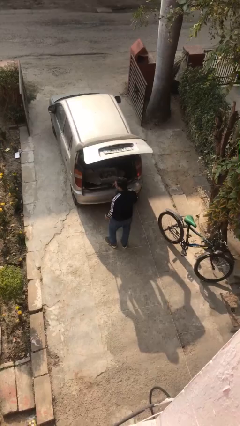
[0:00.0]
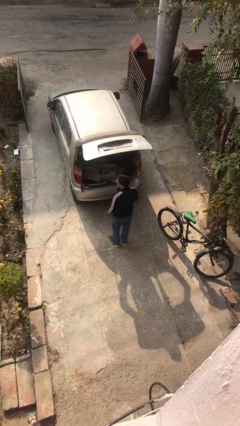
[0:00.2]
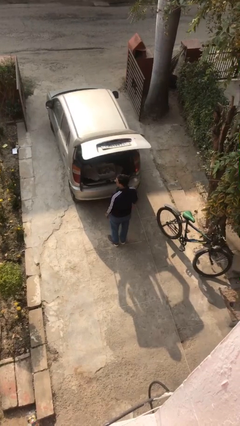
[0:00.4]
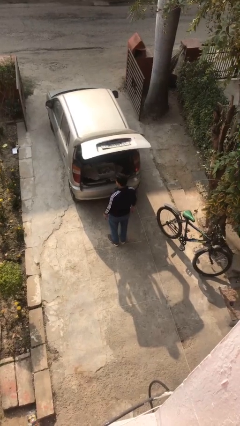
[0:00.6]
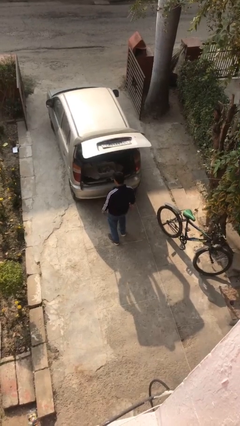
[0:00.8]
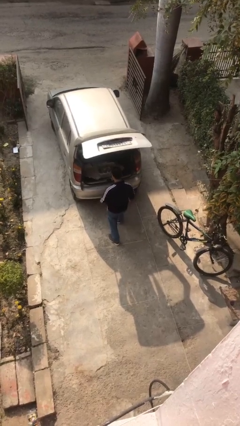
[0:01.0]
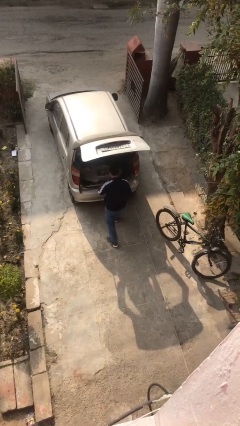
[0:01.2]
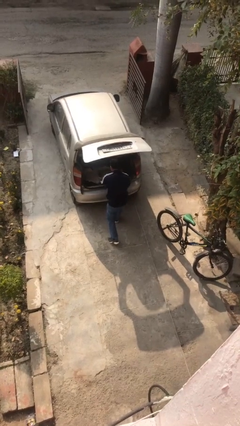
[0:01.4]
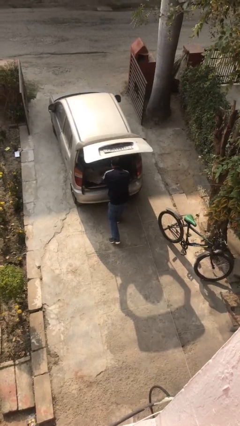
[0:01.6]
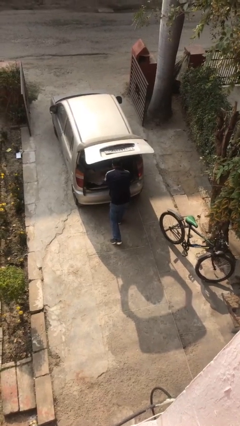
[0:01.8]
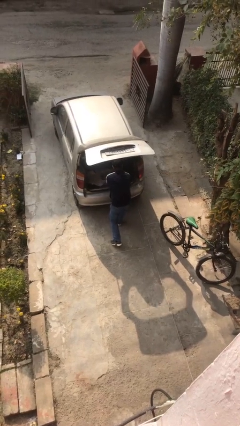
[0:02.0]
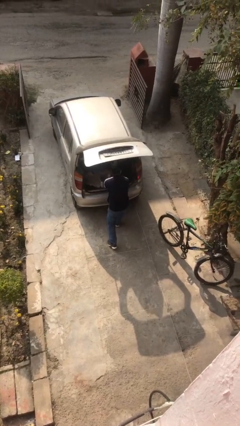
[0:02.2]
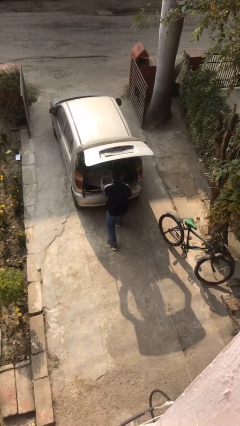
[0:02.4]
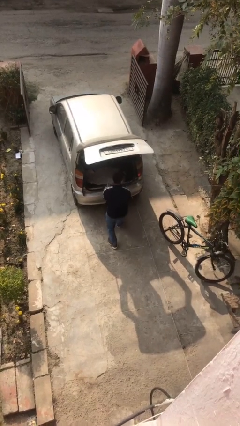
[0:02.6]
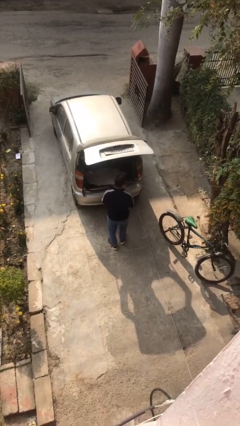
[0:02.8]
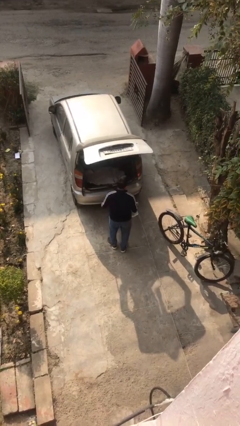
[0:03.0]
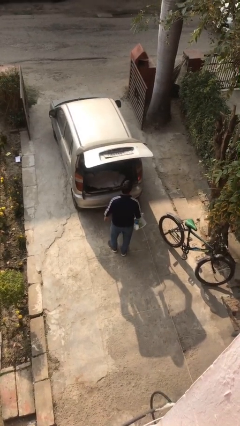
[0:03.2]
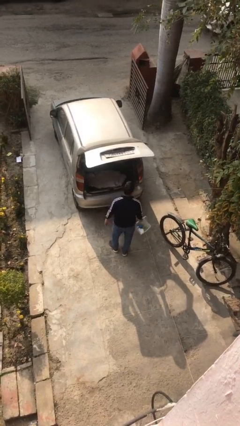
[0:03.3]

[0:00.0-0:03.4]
person unloads car

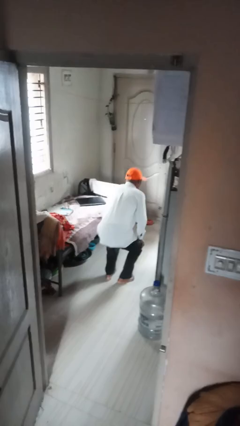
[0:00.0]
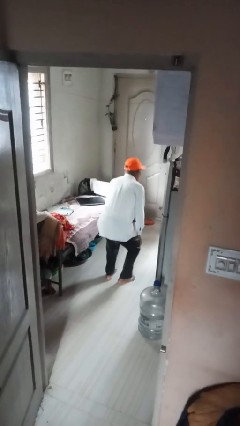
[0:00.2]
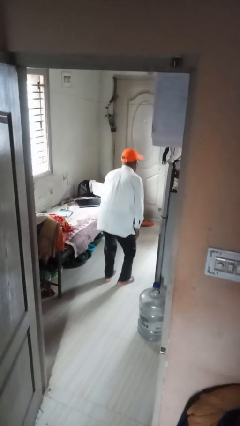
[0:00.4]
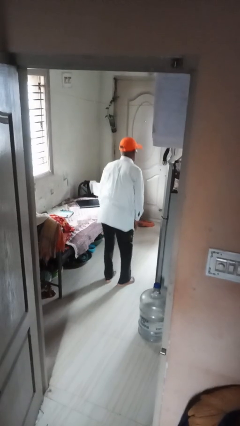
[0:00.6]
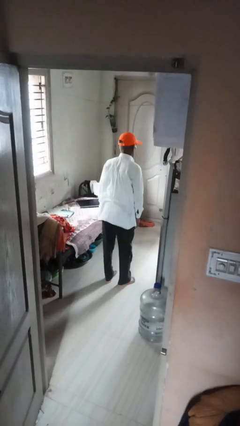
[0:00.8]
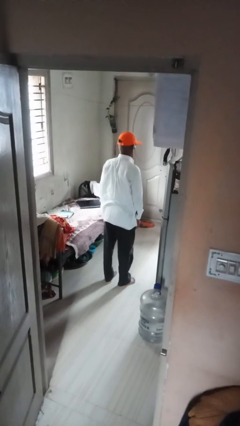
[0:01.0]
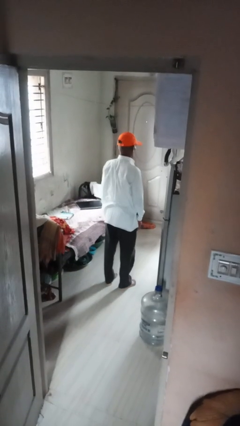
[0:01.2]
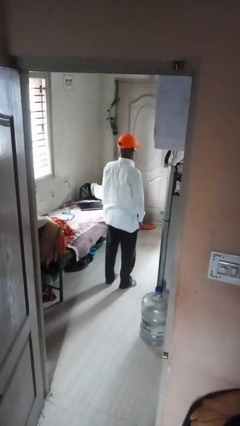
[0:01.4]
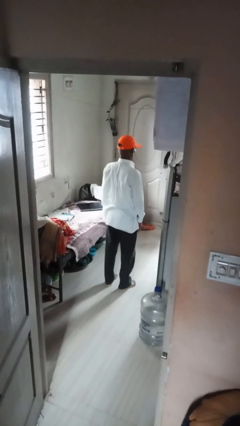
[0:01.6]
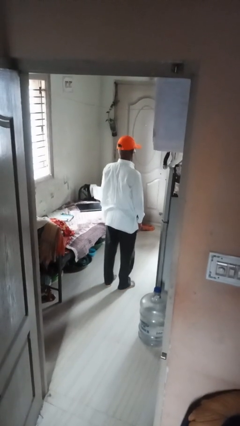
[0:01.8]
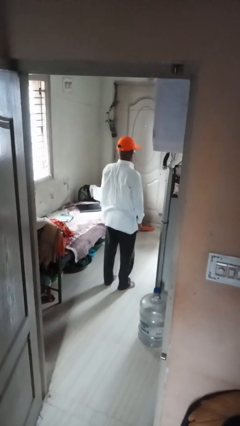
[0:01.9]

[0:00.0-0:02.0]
person stands up

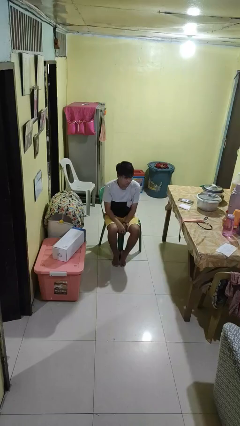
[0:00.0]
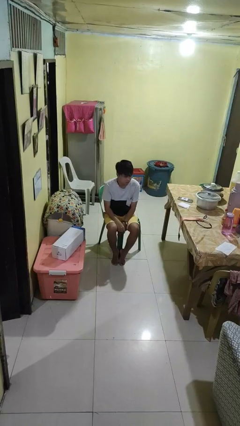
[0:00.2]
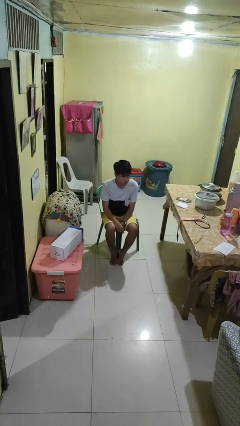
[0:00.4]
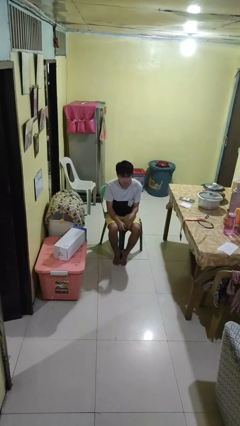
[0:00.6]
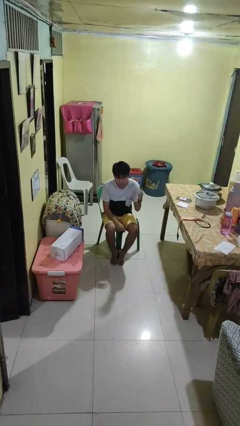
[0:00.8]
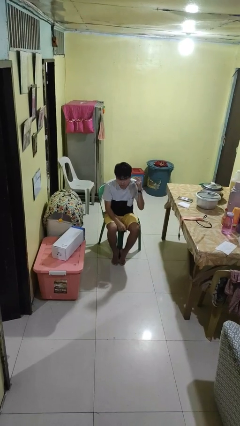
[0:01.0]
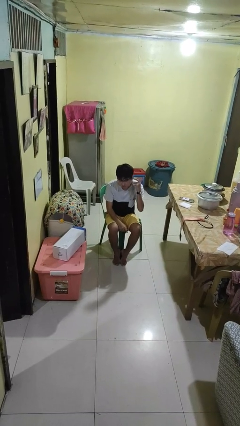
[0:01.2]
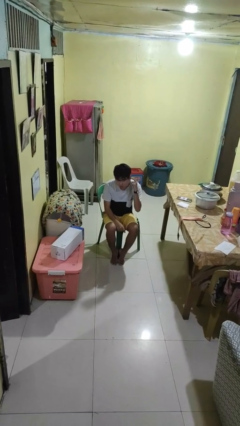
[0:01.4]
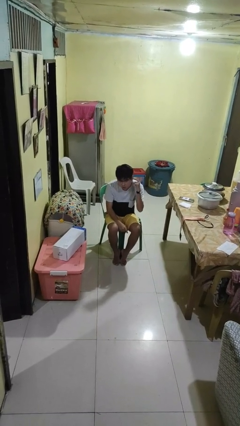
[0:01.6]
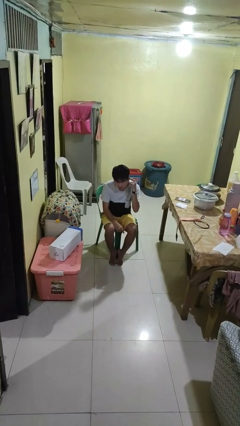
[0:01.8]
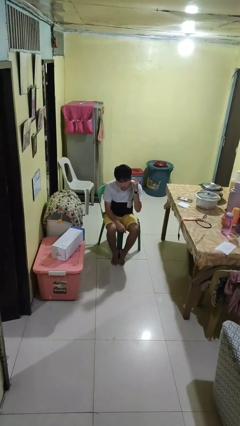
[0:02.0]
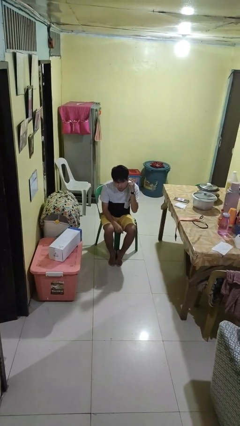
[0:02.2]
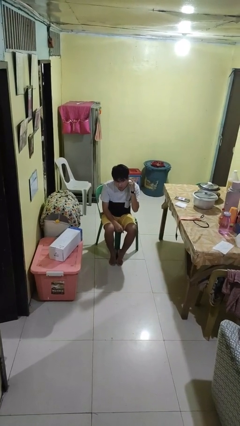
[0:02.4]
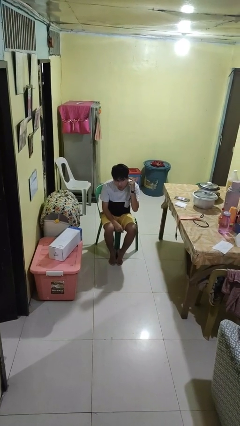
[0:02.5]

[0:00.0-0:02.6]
person gestures listen closely

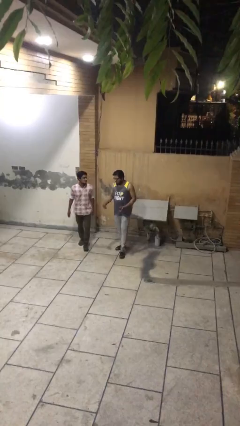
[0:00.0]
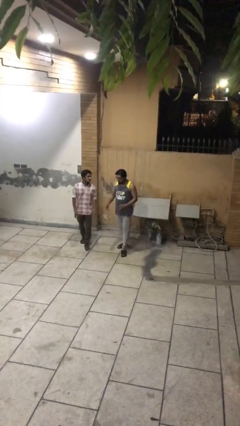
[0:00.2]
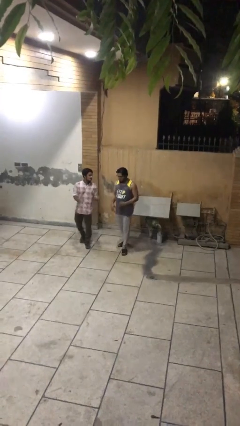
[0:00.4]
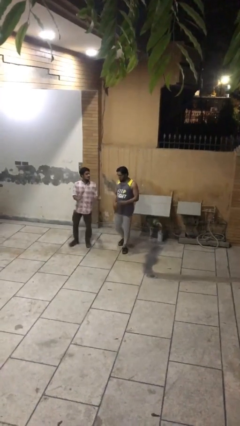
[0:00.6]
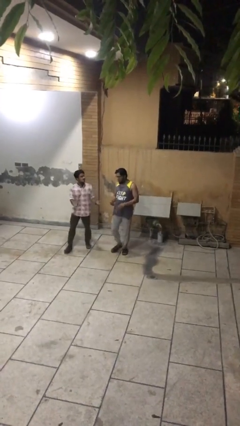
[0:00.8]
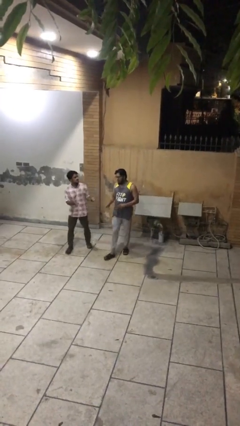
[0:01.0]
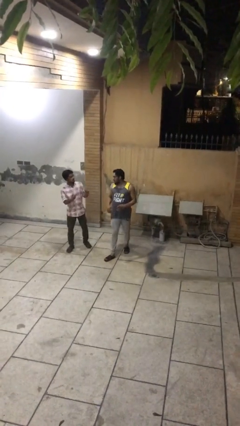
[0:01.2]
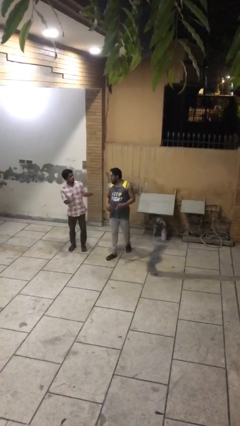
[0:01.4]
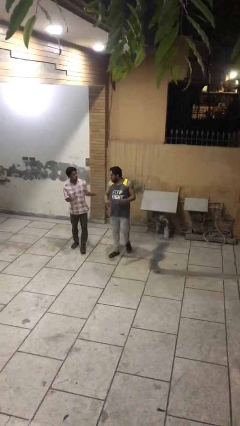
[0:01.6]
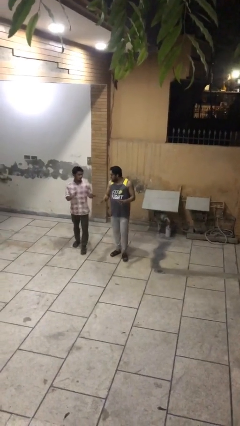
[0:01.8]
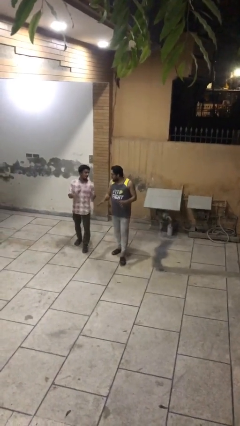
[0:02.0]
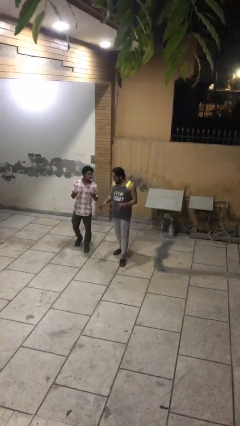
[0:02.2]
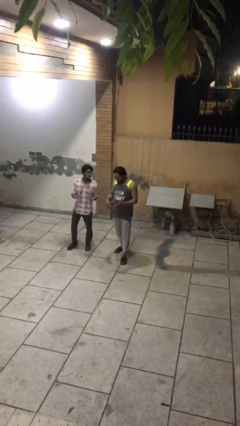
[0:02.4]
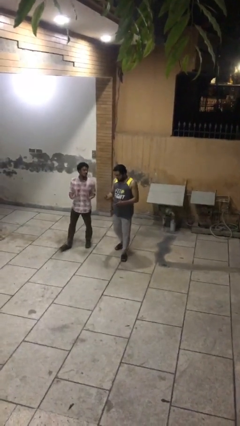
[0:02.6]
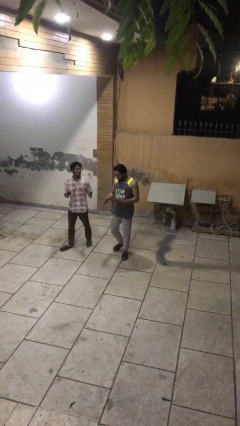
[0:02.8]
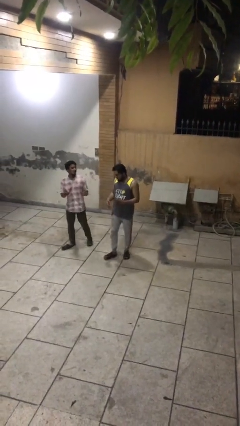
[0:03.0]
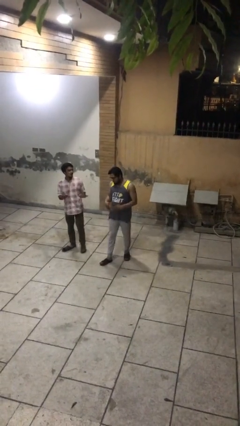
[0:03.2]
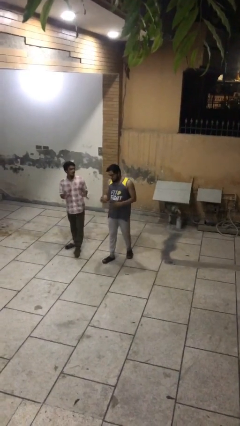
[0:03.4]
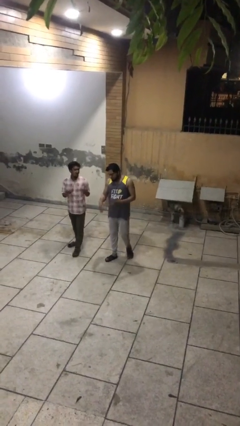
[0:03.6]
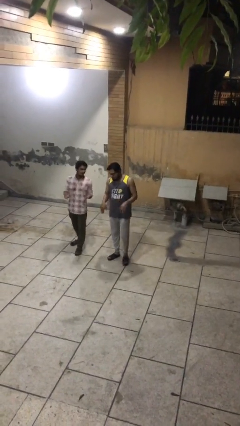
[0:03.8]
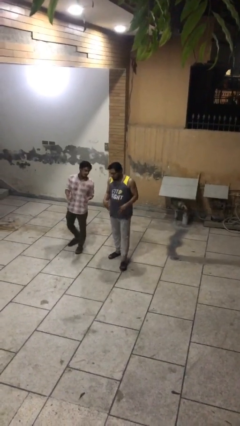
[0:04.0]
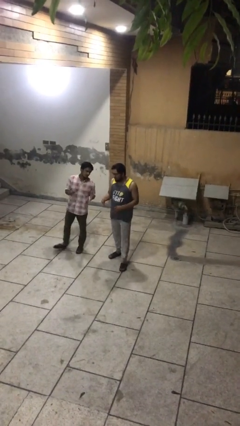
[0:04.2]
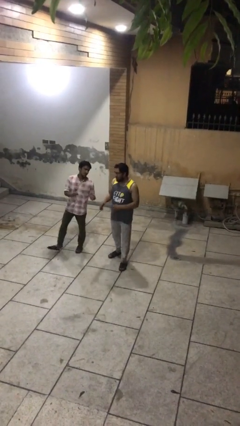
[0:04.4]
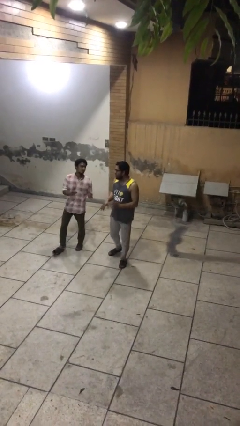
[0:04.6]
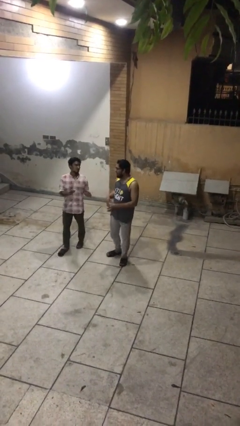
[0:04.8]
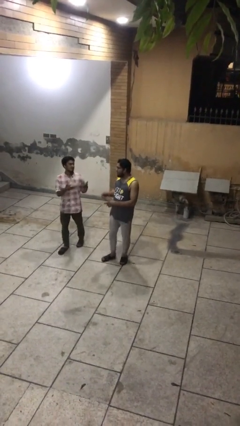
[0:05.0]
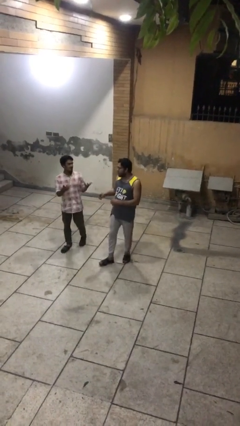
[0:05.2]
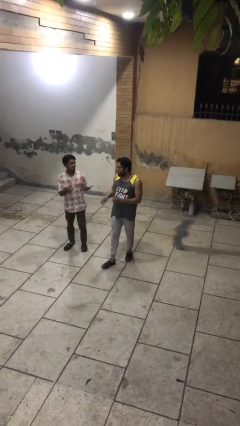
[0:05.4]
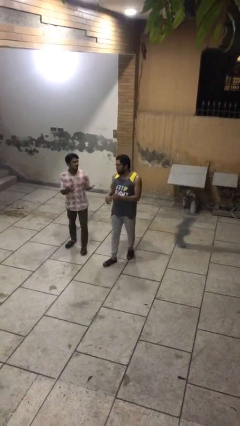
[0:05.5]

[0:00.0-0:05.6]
person talks to person

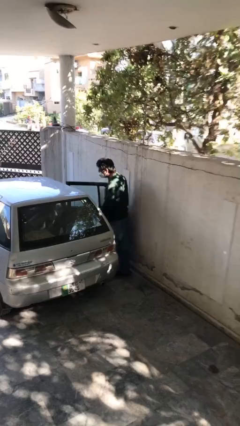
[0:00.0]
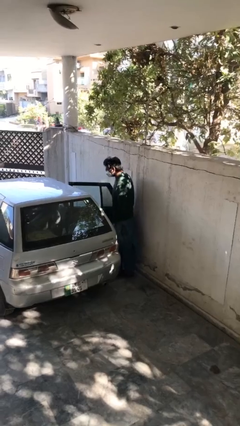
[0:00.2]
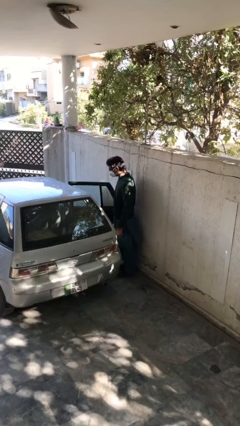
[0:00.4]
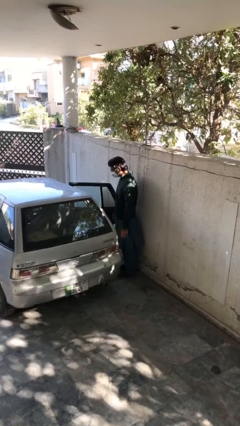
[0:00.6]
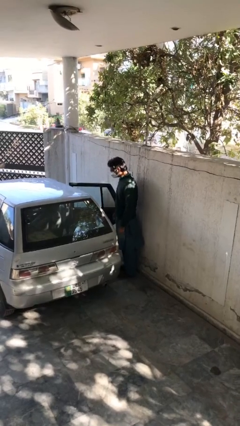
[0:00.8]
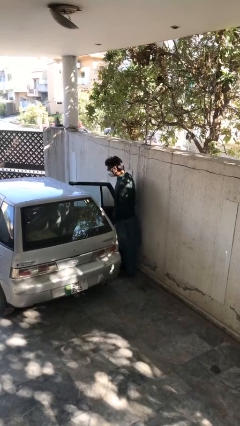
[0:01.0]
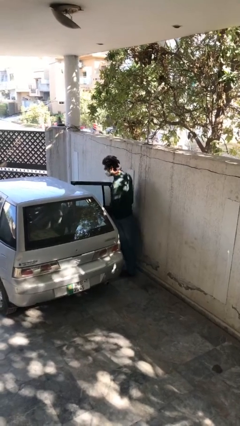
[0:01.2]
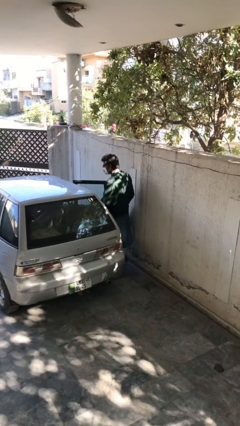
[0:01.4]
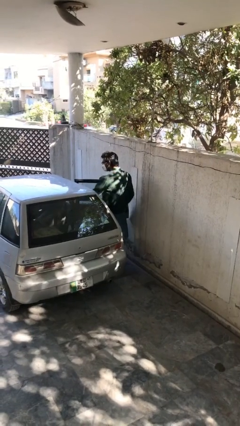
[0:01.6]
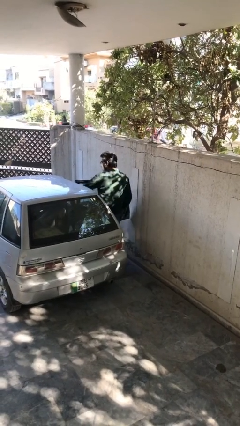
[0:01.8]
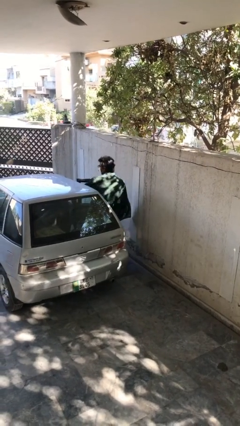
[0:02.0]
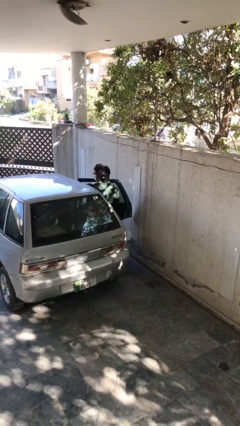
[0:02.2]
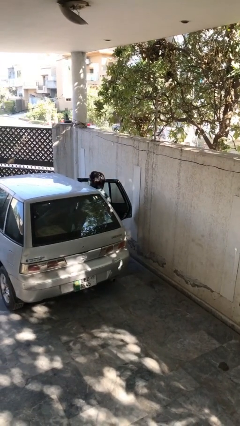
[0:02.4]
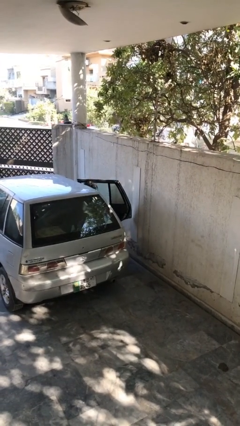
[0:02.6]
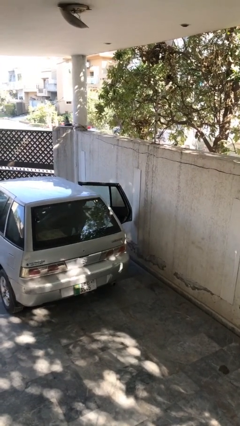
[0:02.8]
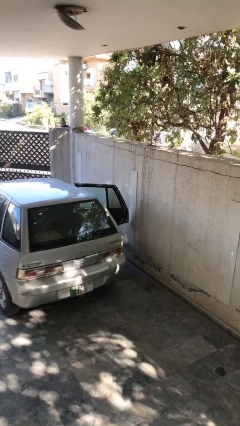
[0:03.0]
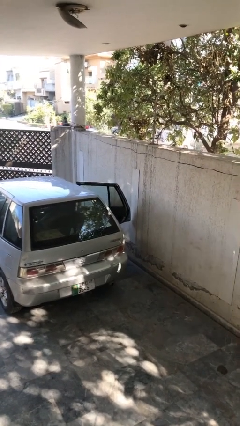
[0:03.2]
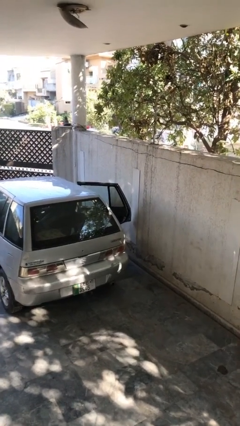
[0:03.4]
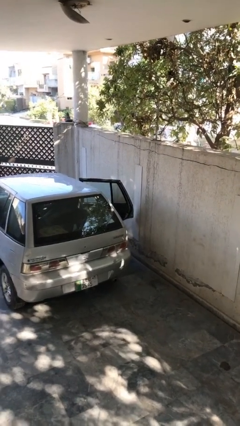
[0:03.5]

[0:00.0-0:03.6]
person enters car

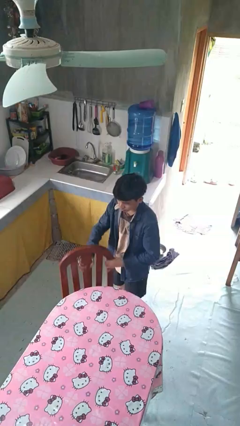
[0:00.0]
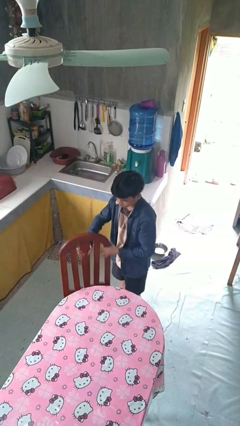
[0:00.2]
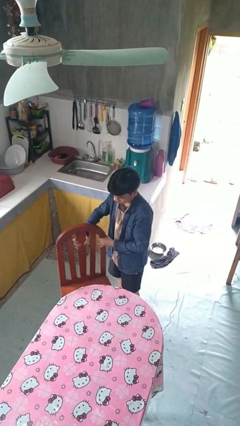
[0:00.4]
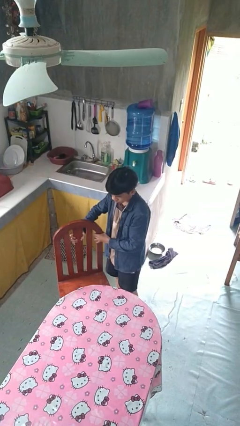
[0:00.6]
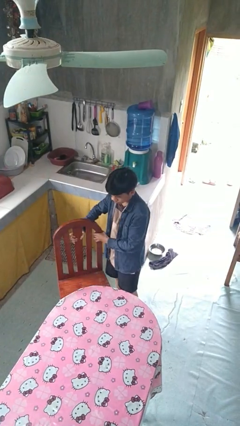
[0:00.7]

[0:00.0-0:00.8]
person pulls out chair
